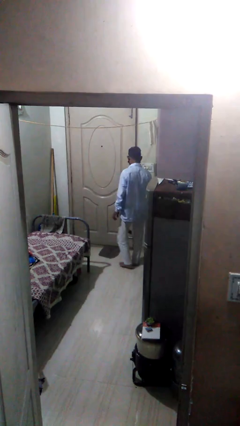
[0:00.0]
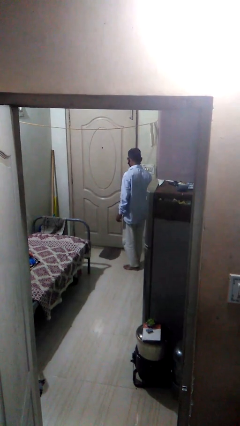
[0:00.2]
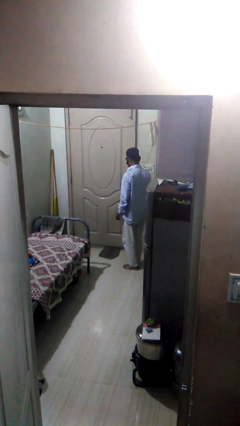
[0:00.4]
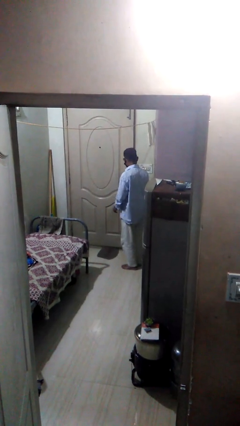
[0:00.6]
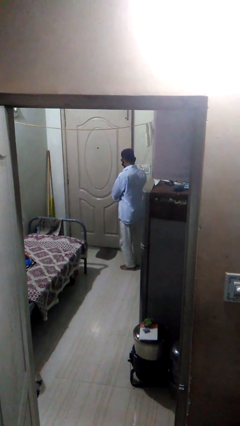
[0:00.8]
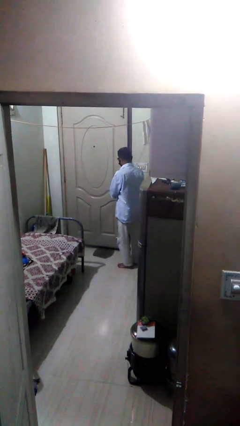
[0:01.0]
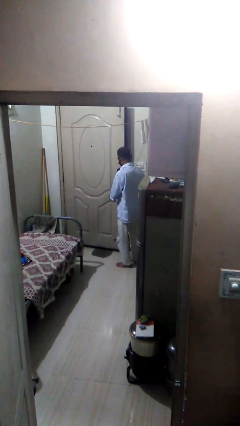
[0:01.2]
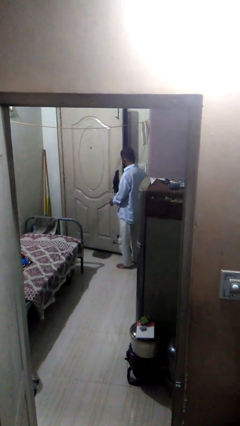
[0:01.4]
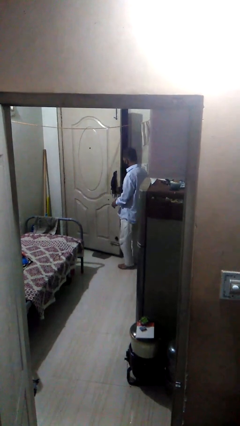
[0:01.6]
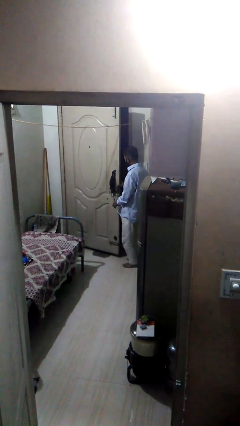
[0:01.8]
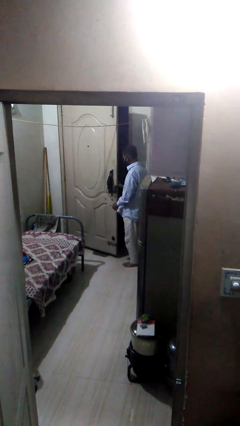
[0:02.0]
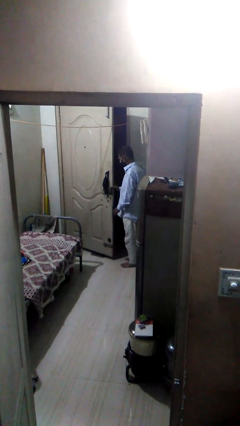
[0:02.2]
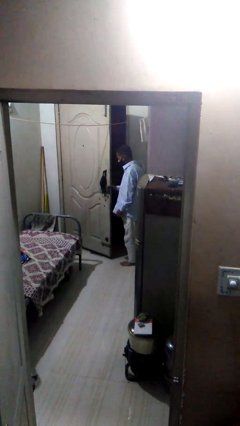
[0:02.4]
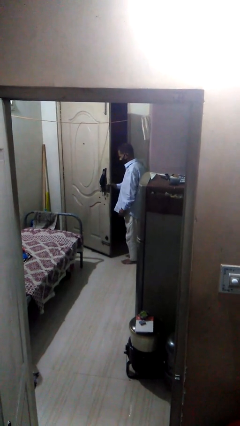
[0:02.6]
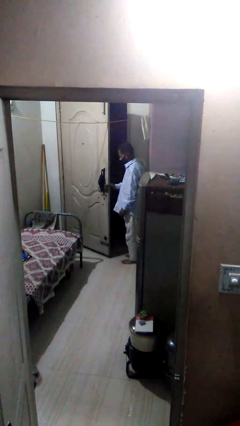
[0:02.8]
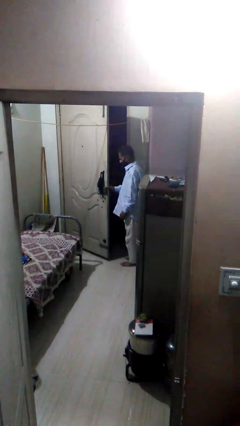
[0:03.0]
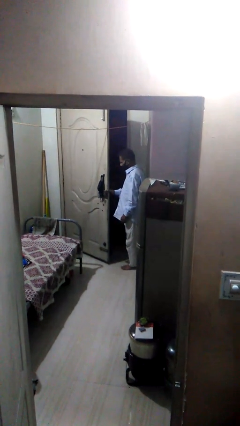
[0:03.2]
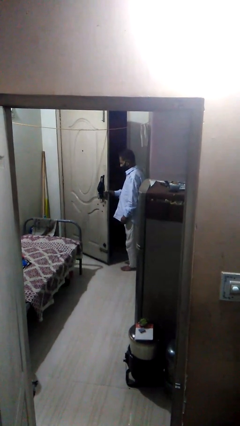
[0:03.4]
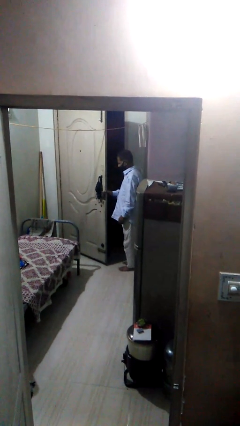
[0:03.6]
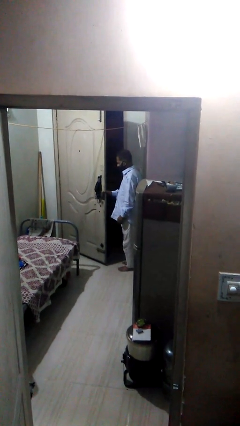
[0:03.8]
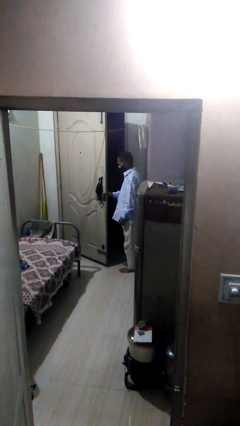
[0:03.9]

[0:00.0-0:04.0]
person opens facility door

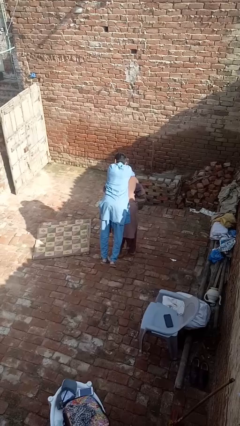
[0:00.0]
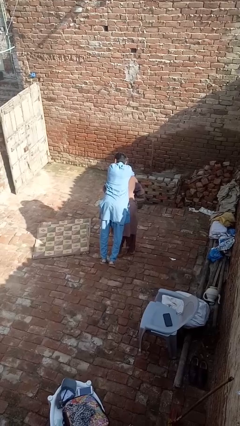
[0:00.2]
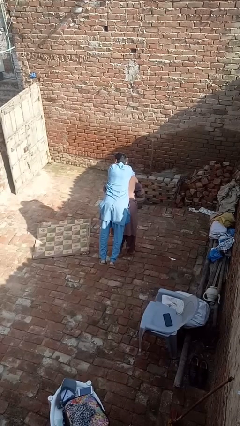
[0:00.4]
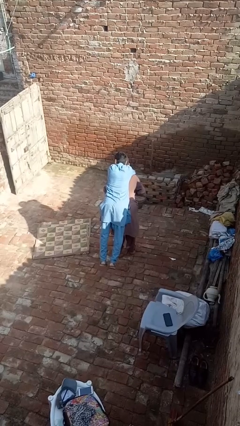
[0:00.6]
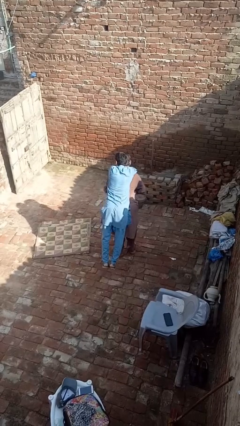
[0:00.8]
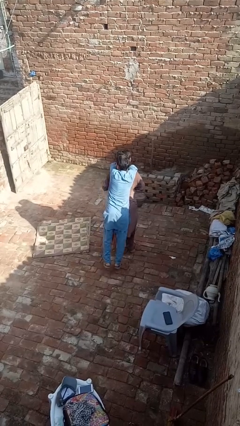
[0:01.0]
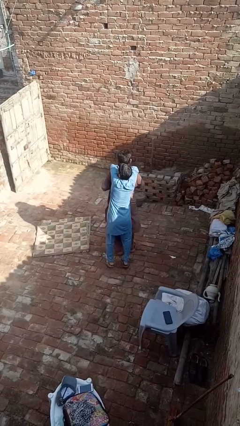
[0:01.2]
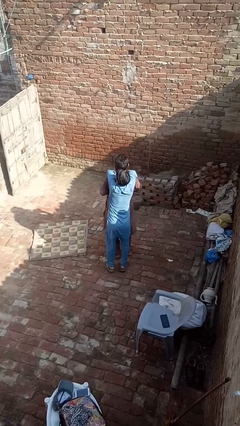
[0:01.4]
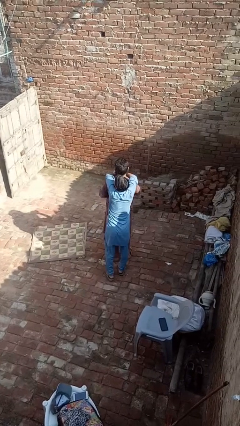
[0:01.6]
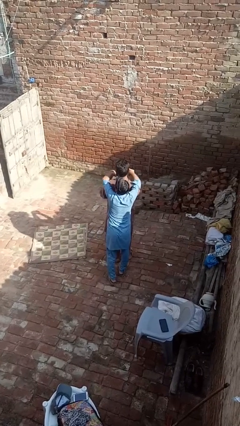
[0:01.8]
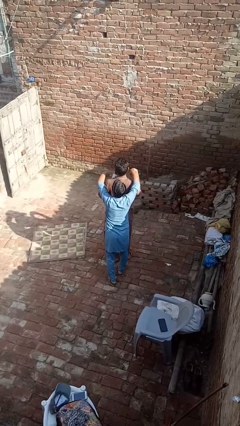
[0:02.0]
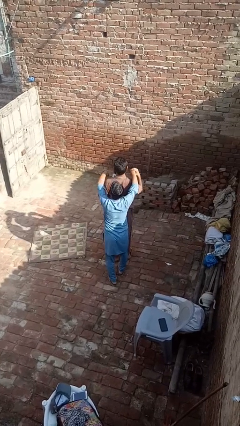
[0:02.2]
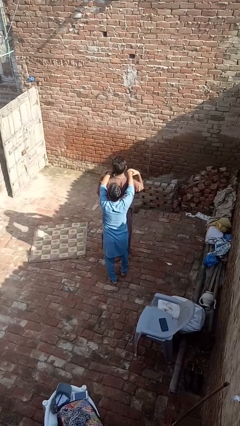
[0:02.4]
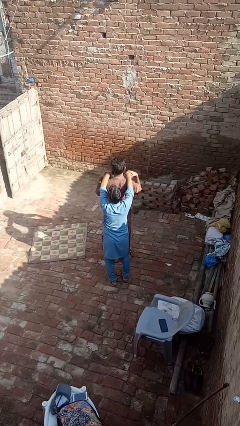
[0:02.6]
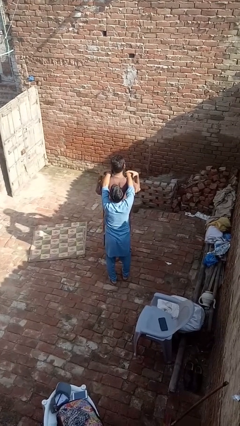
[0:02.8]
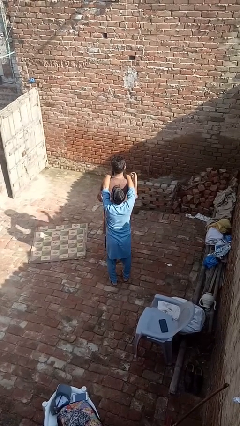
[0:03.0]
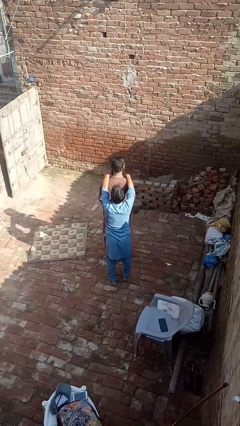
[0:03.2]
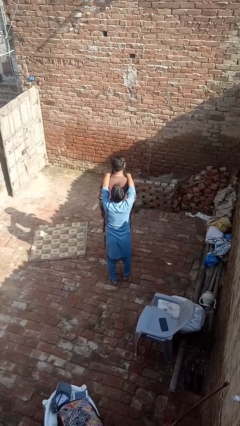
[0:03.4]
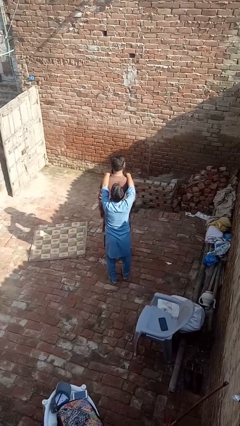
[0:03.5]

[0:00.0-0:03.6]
person puts down person

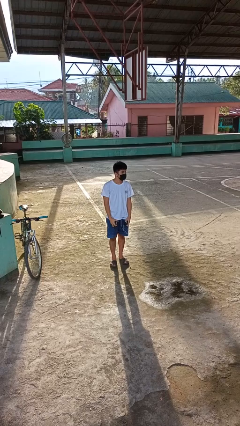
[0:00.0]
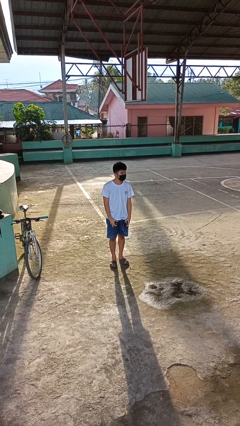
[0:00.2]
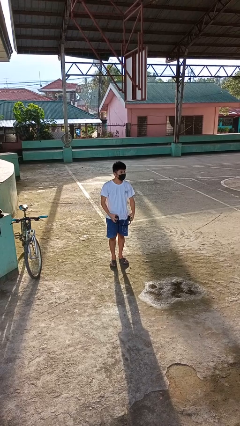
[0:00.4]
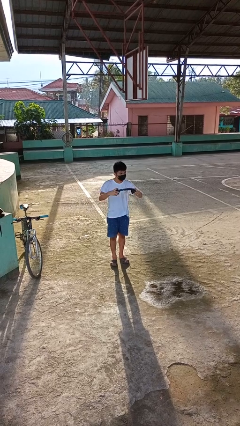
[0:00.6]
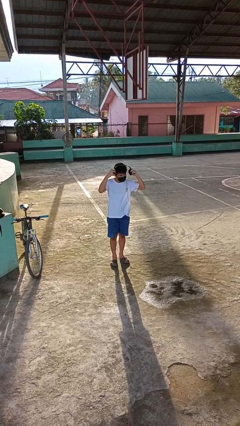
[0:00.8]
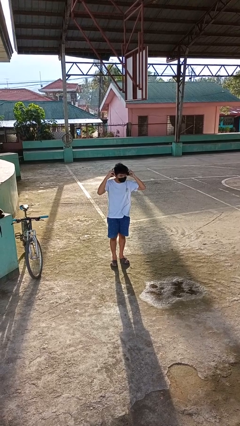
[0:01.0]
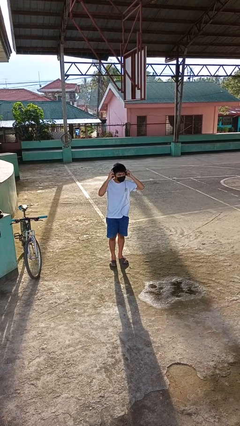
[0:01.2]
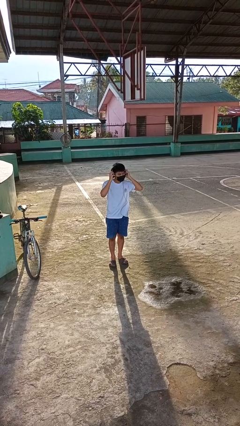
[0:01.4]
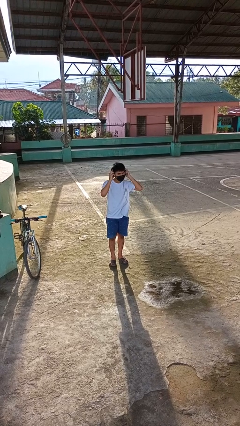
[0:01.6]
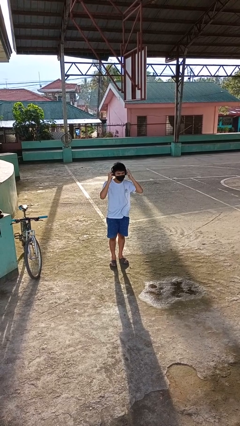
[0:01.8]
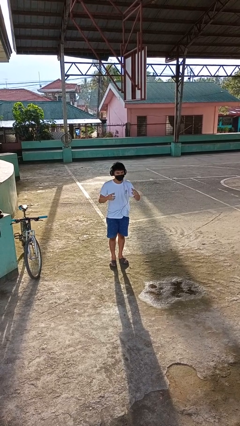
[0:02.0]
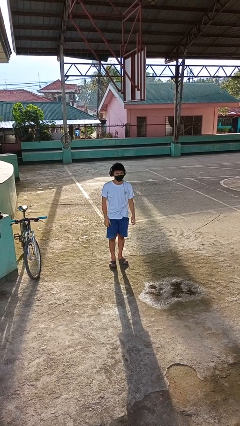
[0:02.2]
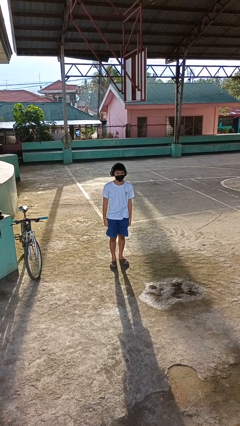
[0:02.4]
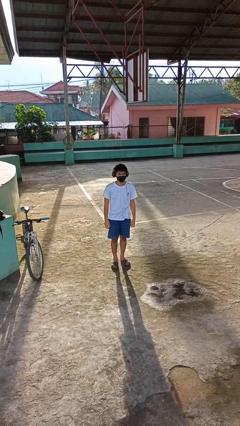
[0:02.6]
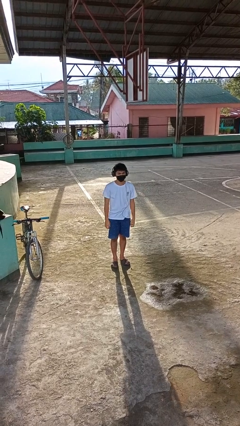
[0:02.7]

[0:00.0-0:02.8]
person puts on headphones

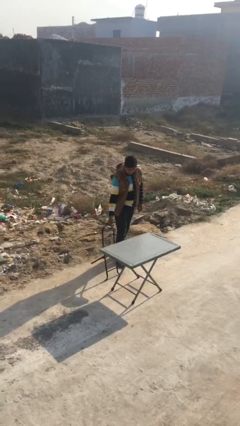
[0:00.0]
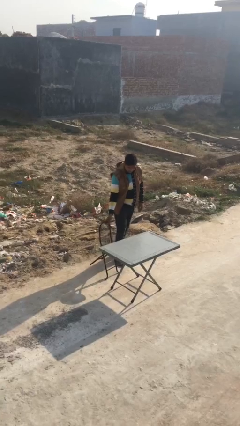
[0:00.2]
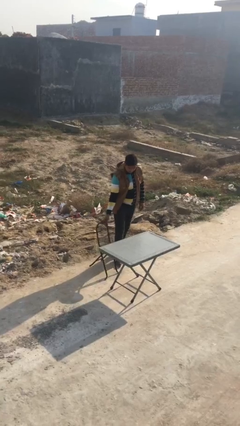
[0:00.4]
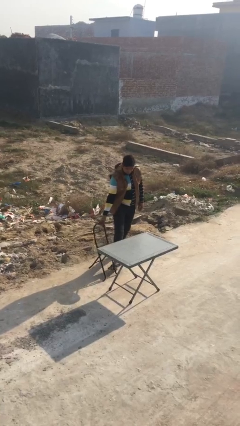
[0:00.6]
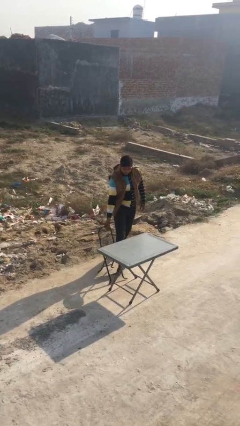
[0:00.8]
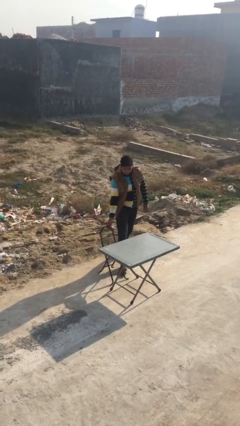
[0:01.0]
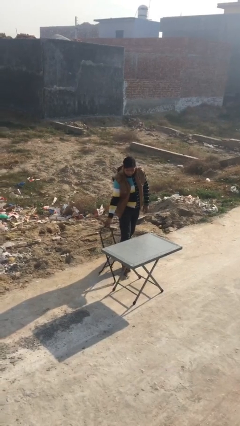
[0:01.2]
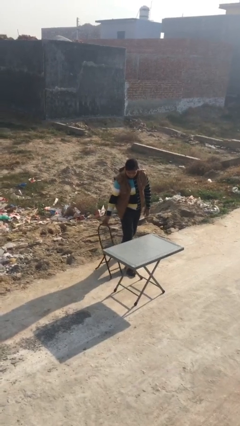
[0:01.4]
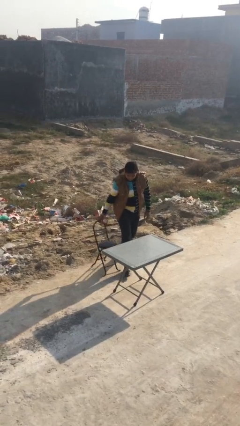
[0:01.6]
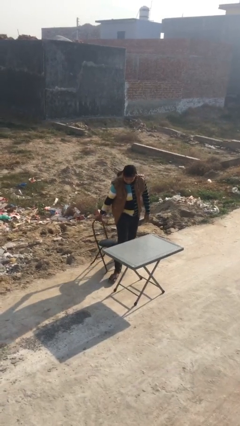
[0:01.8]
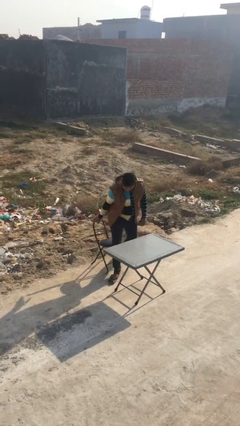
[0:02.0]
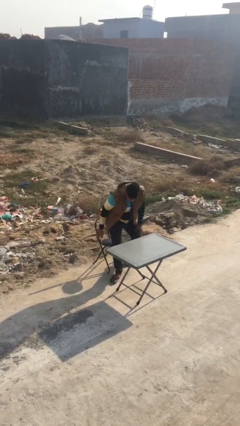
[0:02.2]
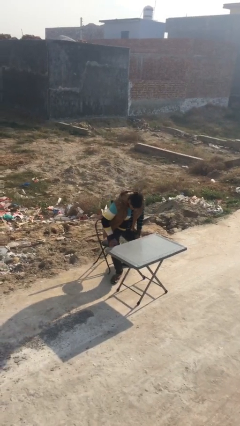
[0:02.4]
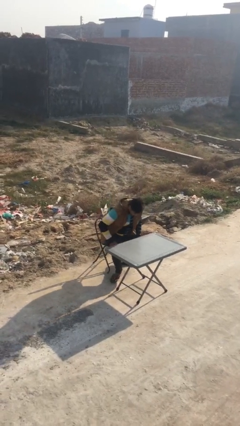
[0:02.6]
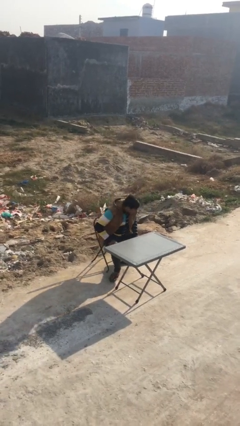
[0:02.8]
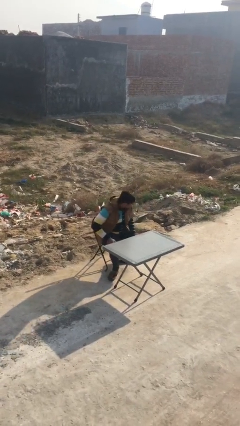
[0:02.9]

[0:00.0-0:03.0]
person sits down

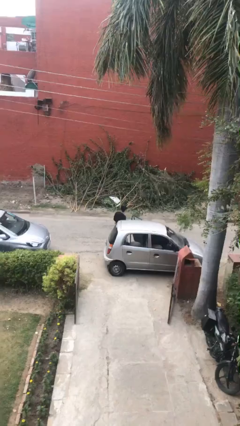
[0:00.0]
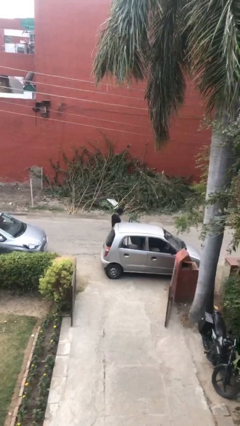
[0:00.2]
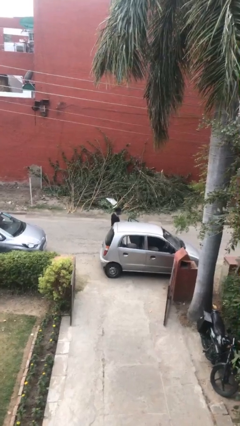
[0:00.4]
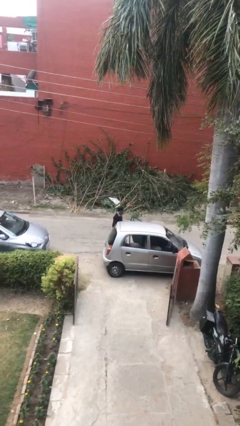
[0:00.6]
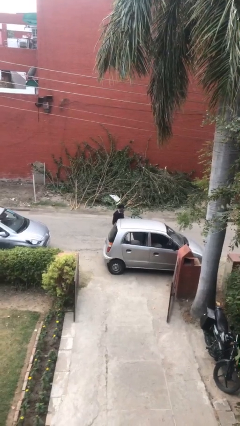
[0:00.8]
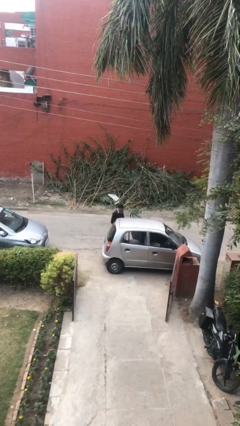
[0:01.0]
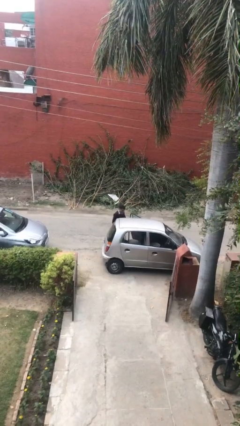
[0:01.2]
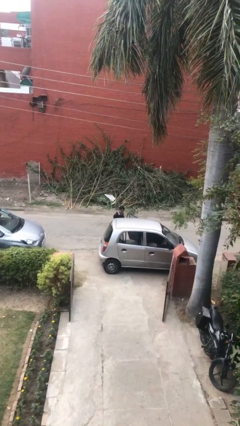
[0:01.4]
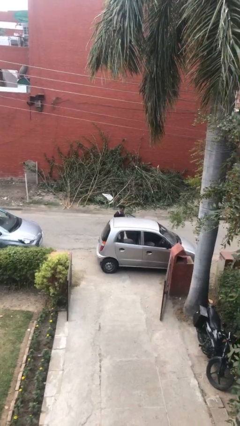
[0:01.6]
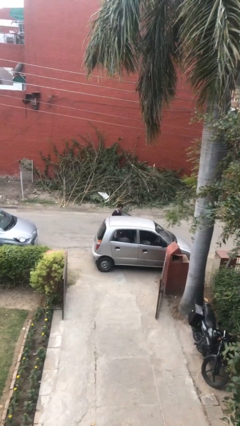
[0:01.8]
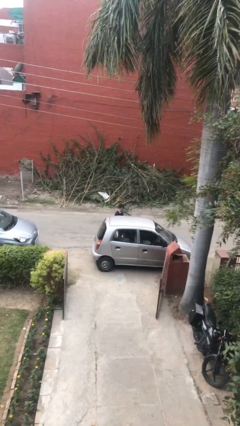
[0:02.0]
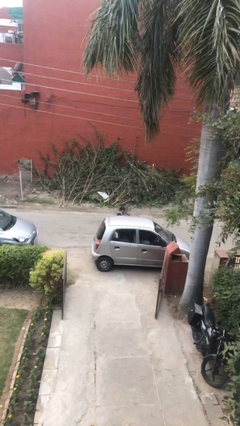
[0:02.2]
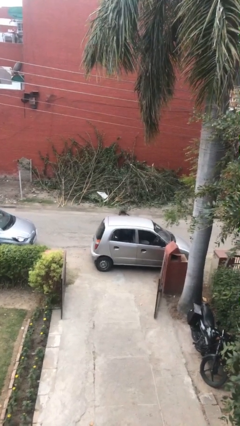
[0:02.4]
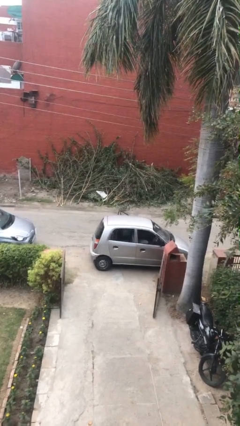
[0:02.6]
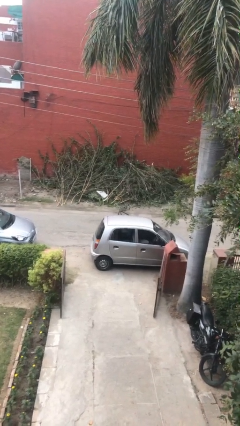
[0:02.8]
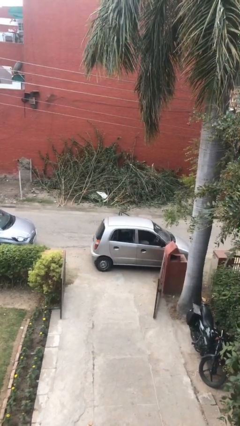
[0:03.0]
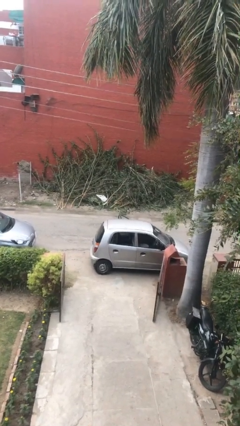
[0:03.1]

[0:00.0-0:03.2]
person enters car

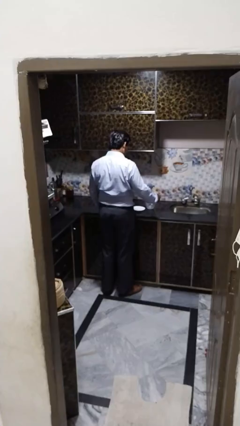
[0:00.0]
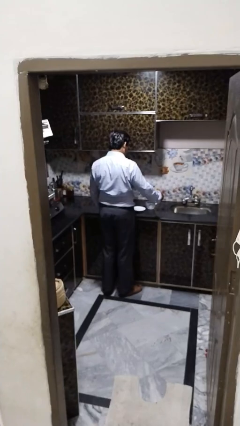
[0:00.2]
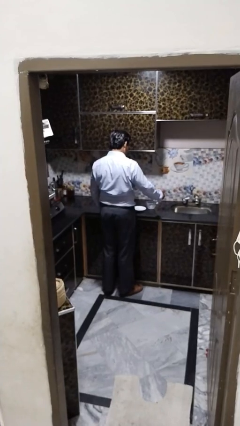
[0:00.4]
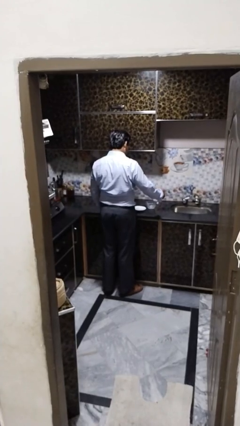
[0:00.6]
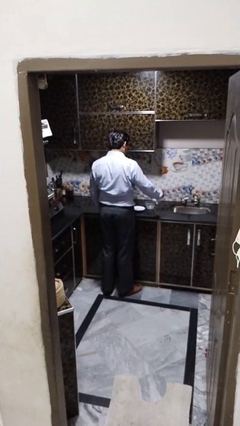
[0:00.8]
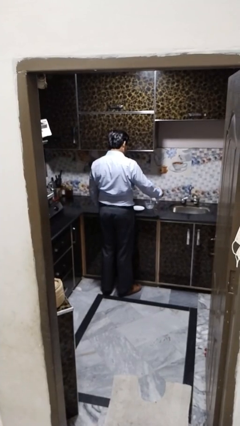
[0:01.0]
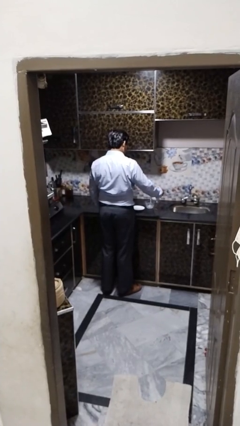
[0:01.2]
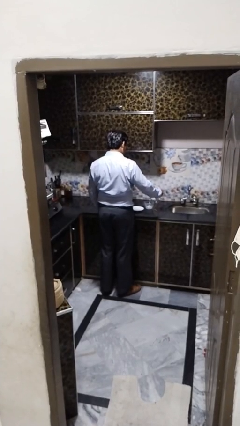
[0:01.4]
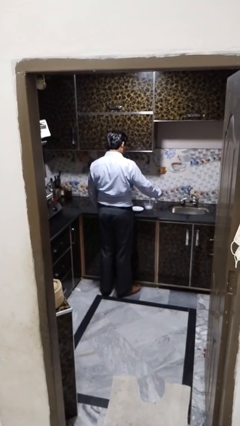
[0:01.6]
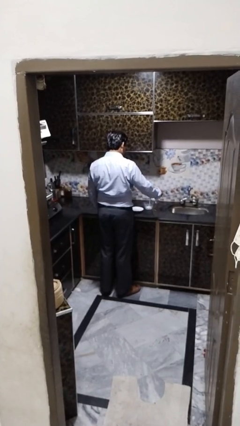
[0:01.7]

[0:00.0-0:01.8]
person pours into bowl
